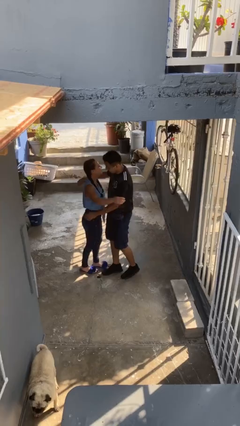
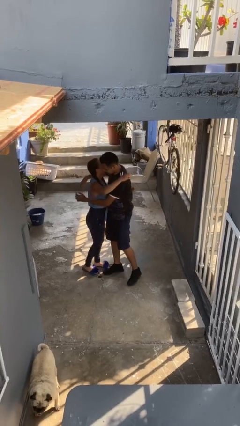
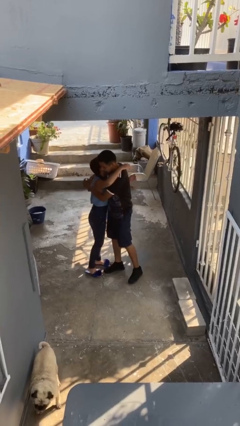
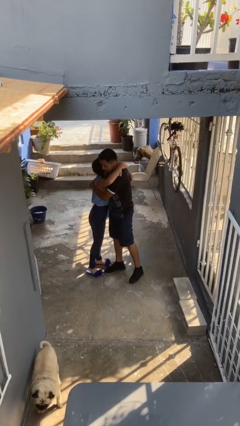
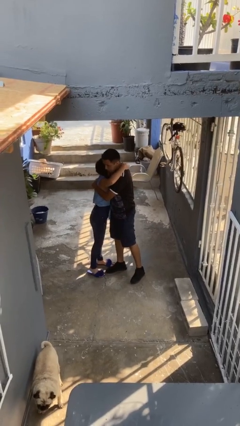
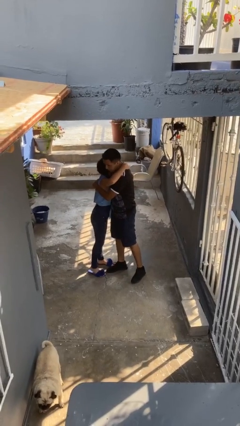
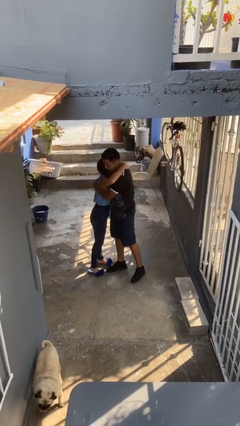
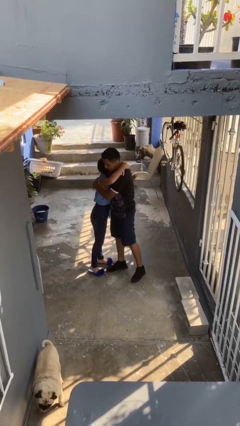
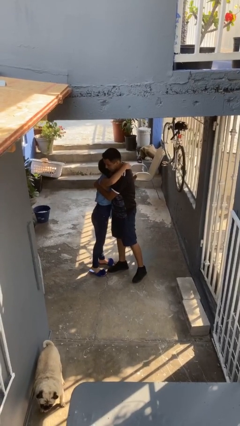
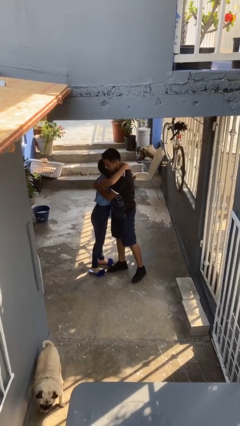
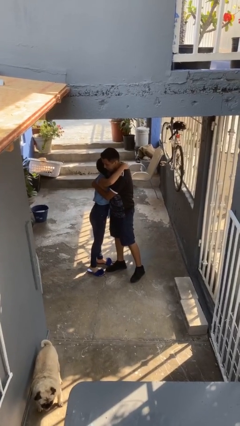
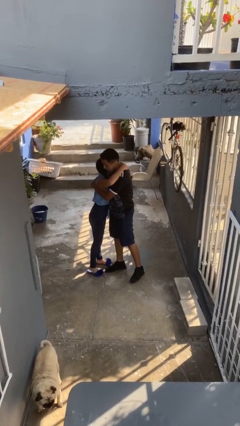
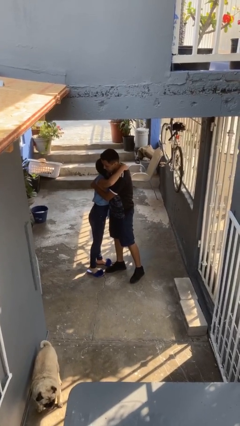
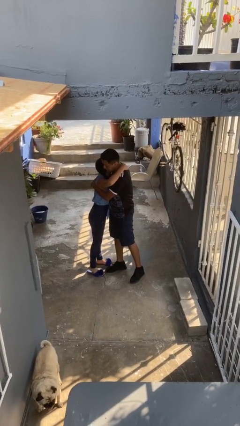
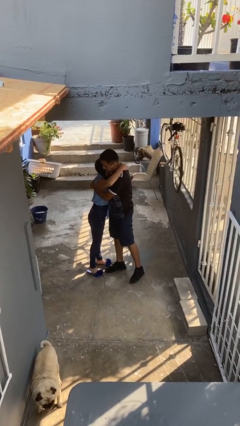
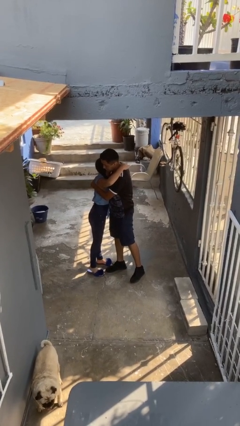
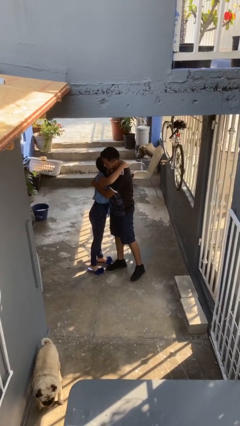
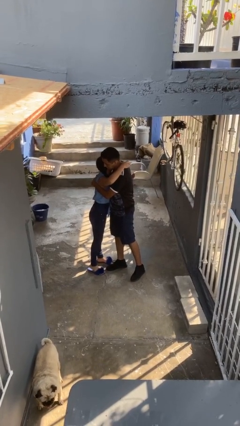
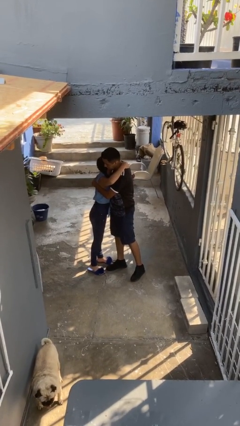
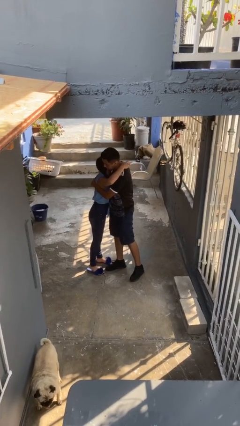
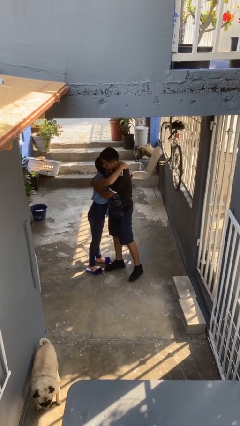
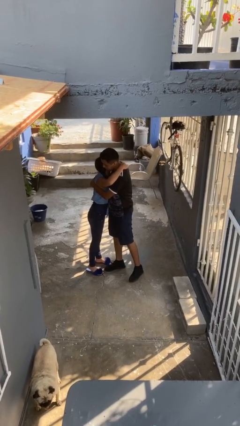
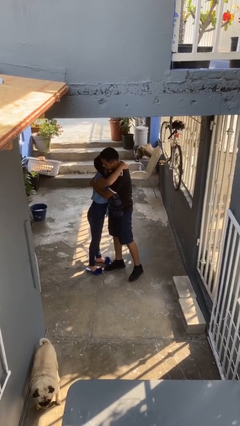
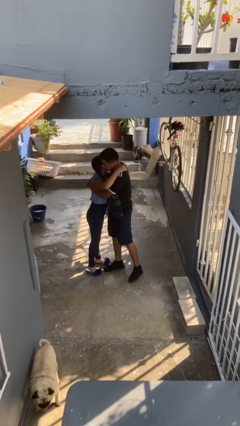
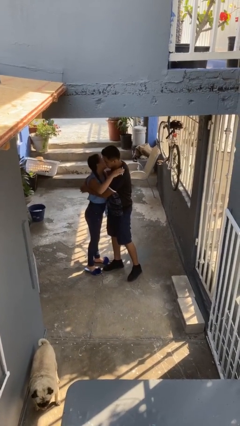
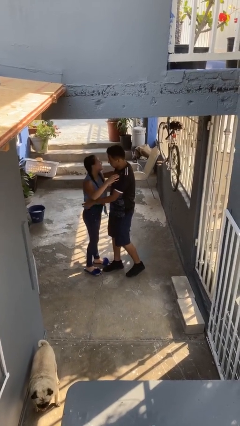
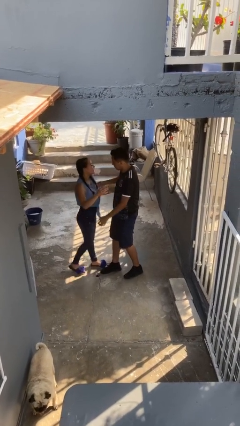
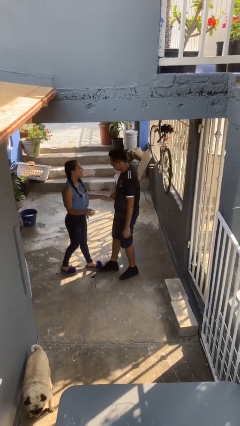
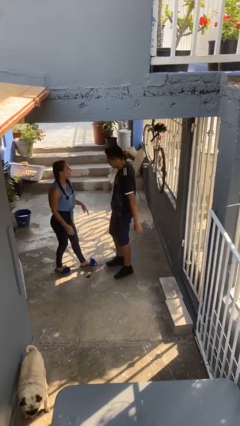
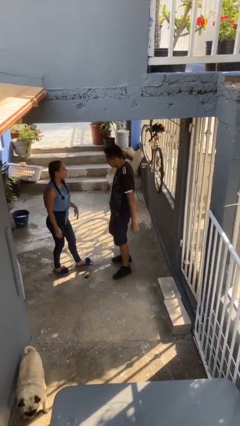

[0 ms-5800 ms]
person embraces person

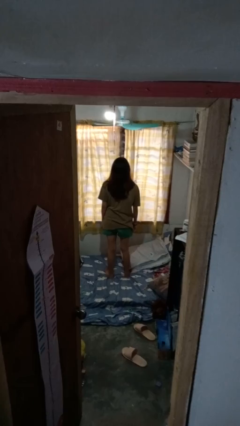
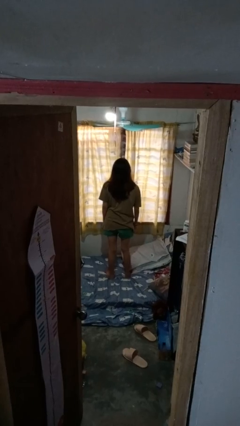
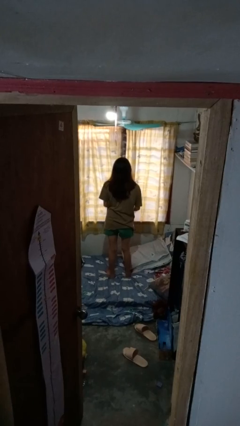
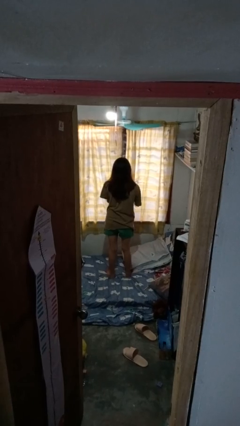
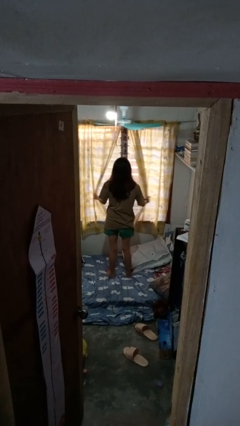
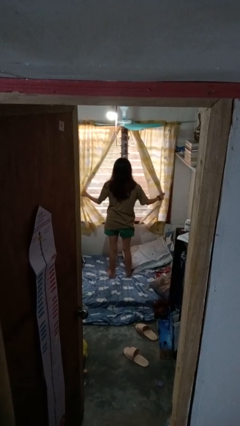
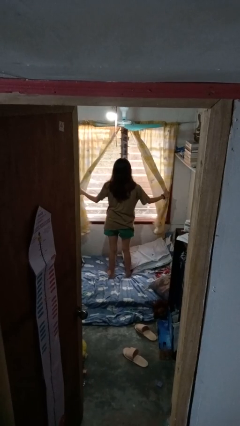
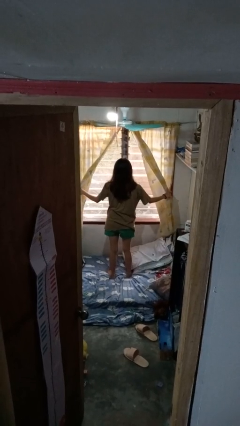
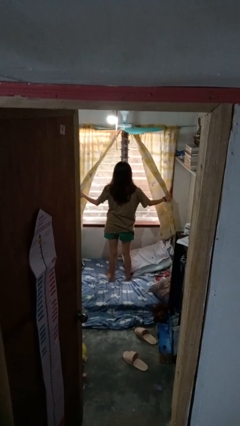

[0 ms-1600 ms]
person opens curtains

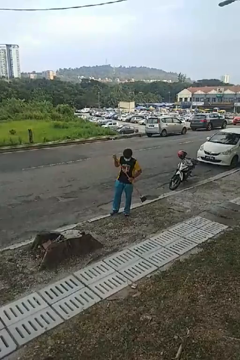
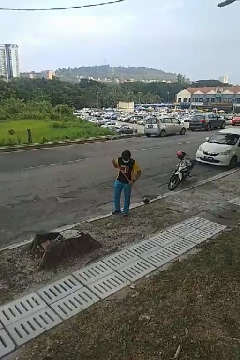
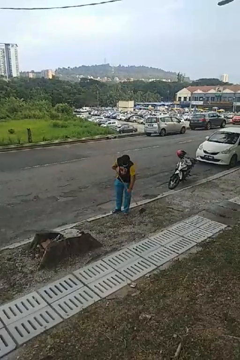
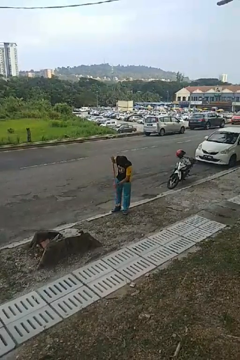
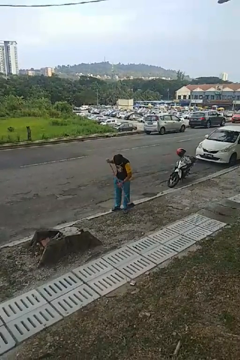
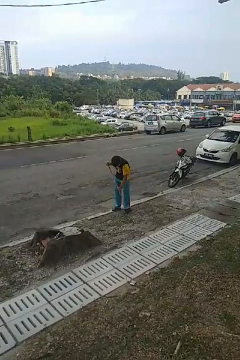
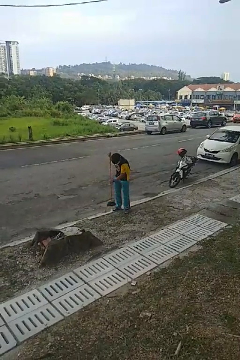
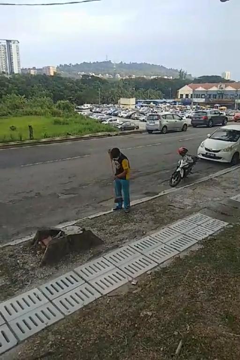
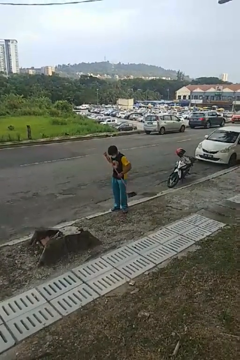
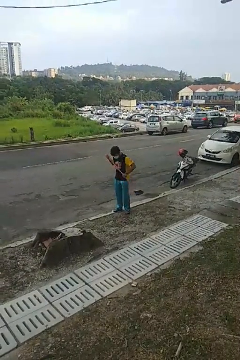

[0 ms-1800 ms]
person sweeps floor

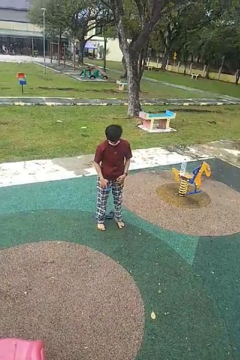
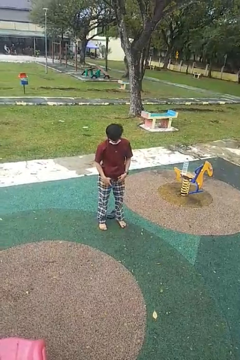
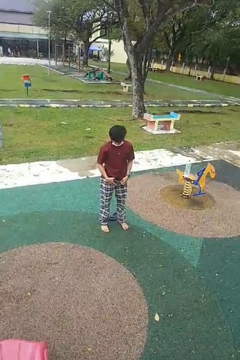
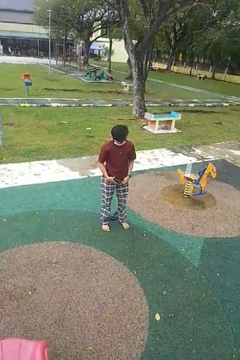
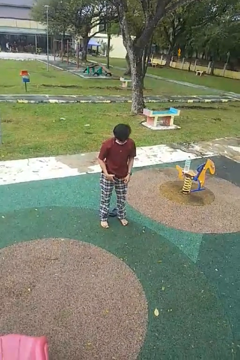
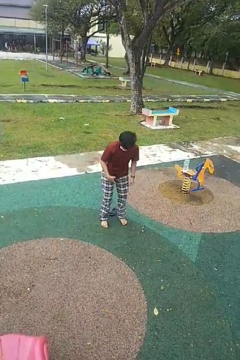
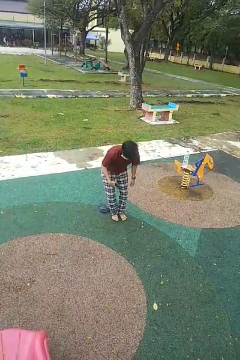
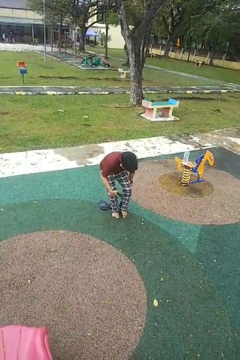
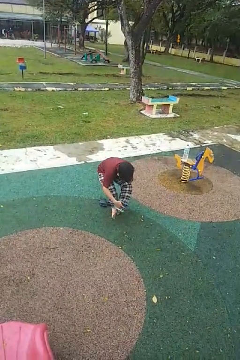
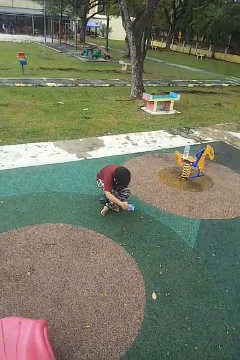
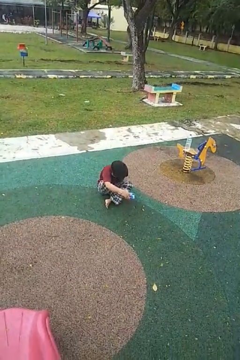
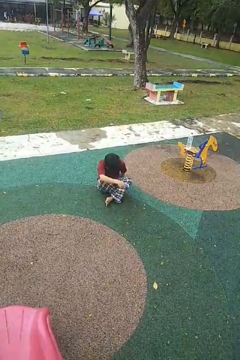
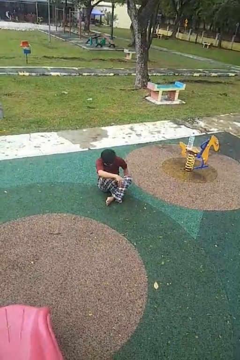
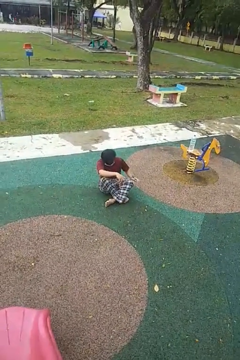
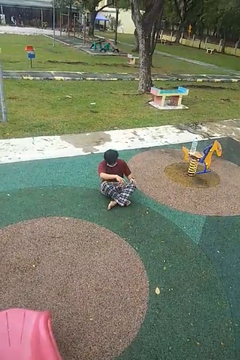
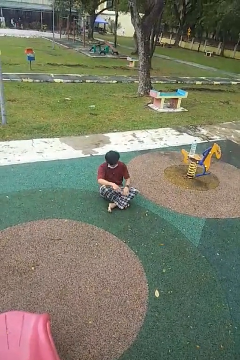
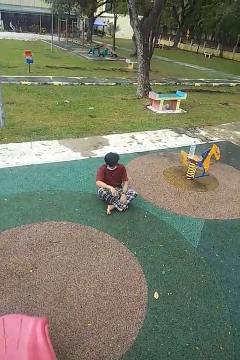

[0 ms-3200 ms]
person sits crisscross

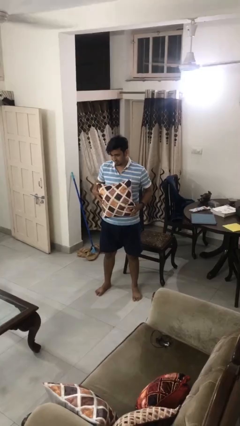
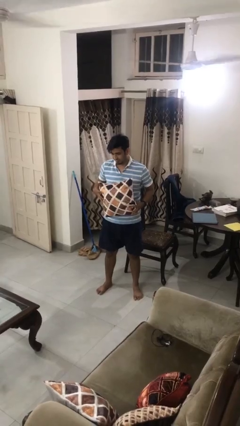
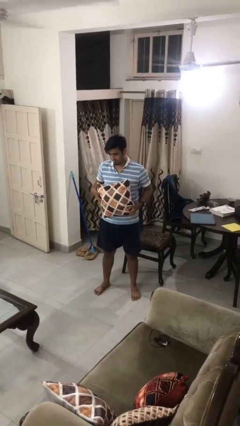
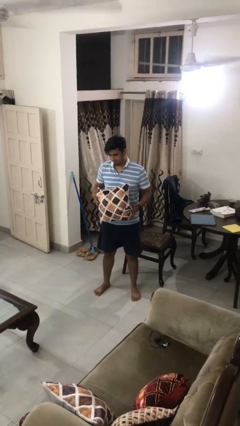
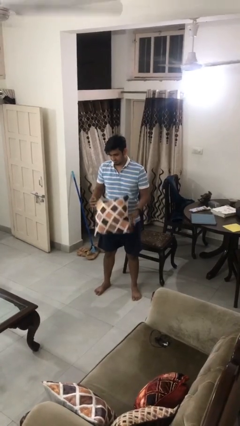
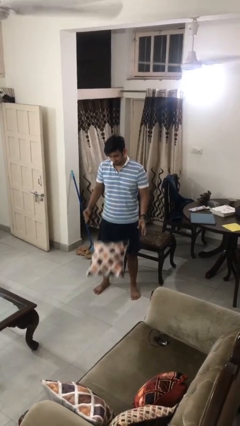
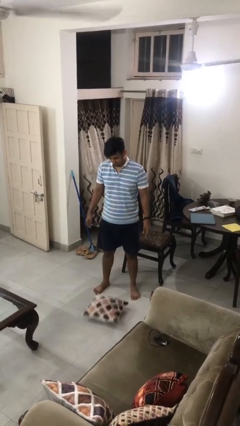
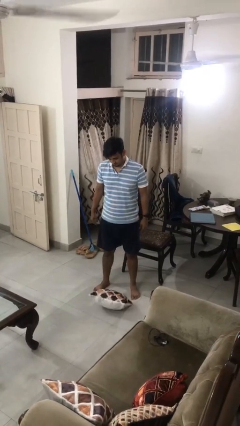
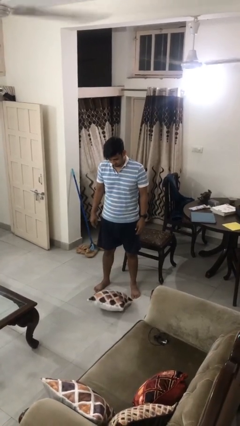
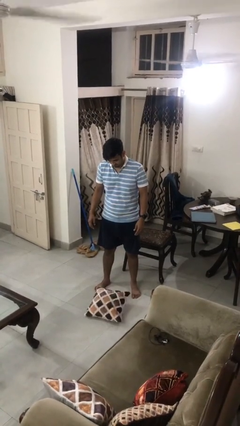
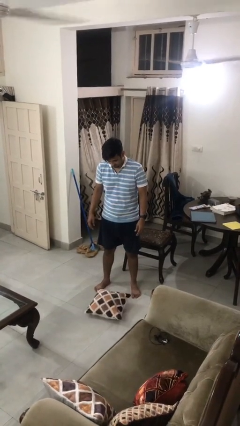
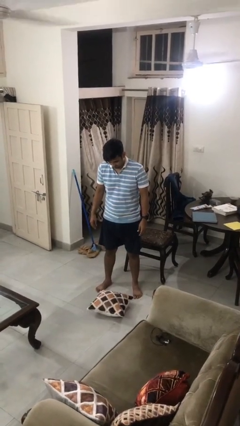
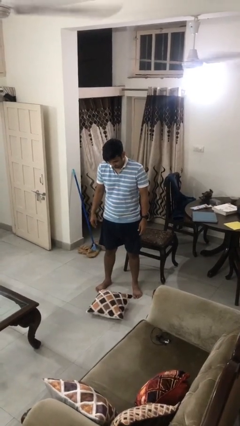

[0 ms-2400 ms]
person drops object

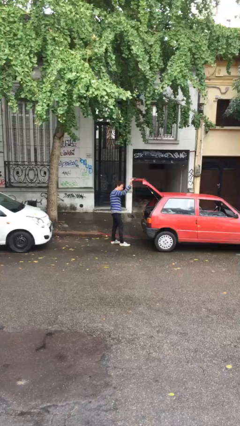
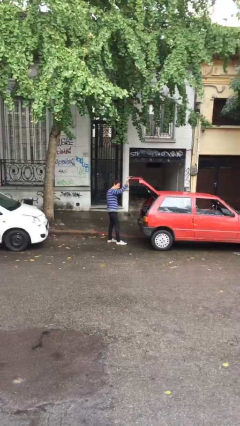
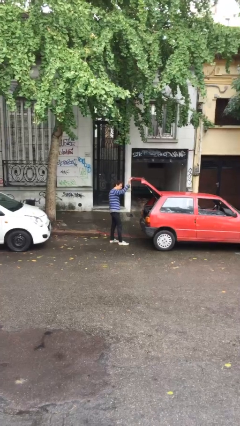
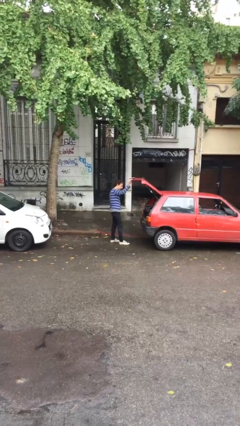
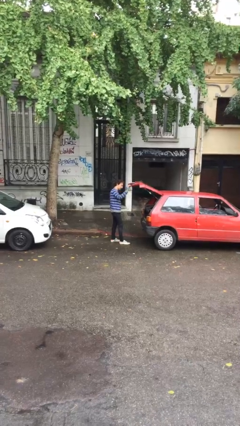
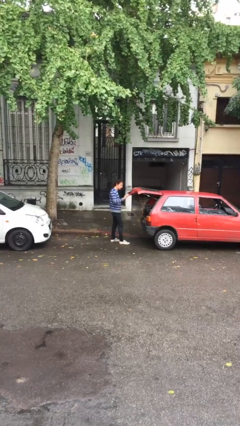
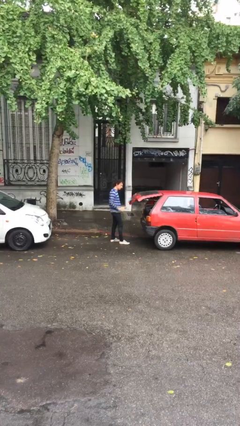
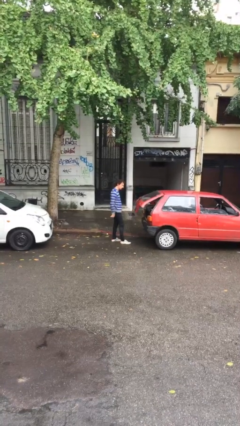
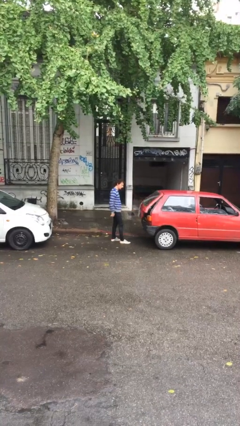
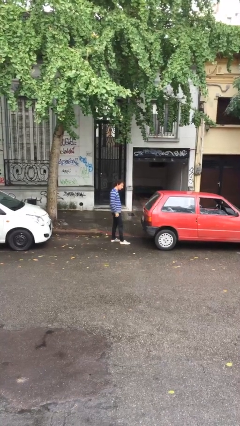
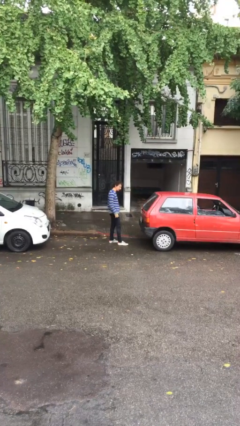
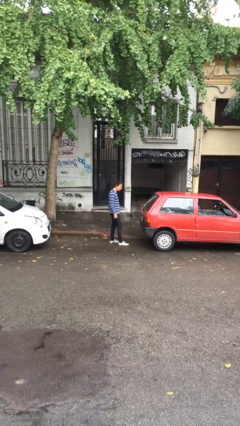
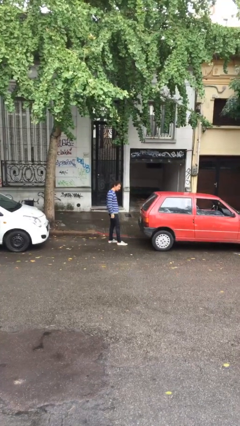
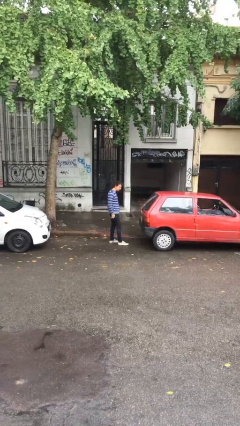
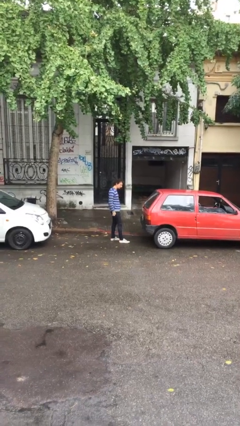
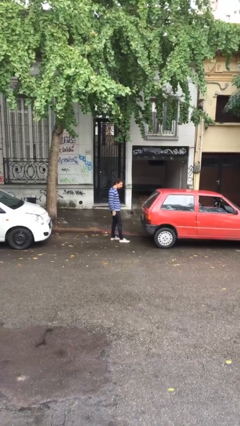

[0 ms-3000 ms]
person closes car trunk

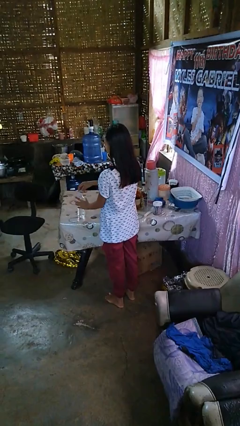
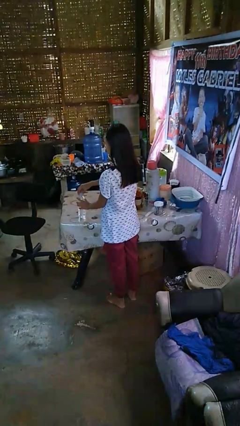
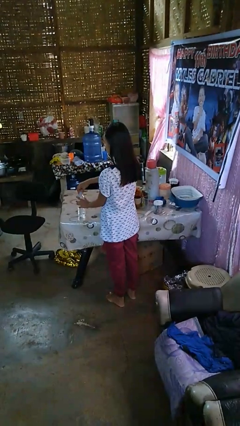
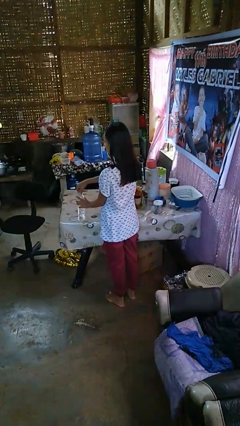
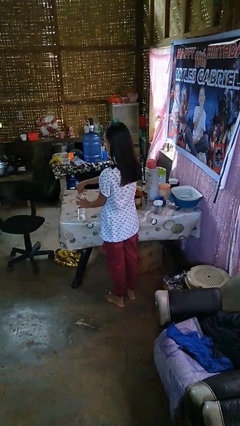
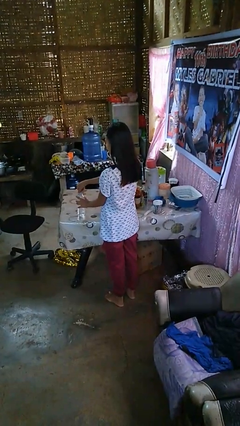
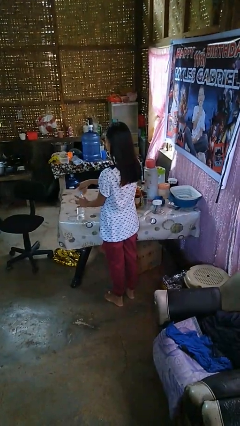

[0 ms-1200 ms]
person screws lid to bottle
